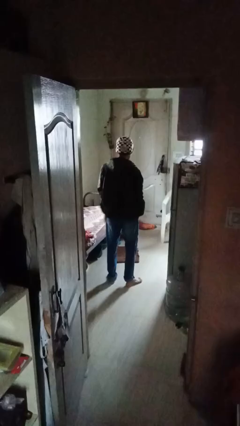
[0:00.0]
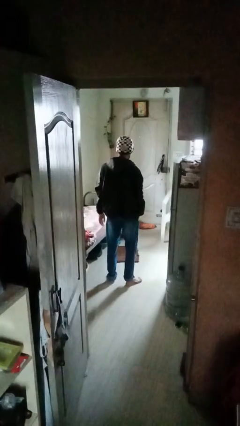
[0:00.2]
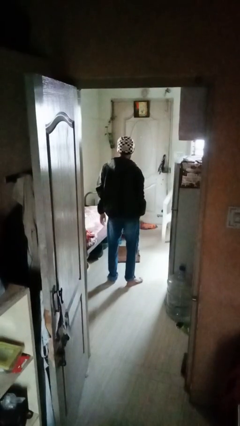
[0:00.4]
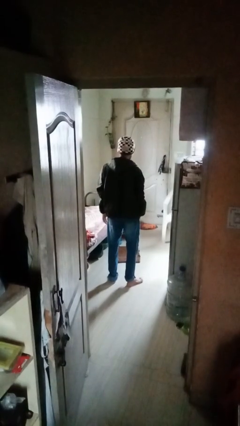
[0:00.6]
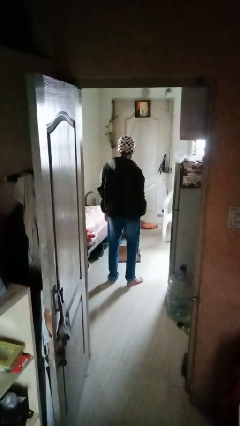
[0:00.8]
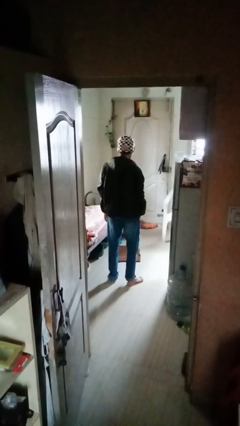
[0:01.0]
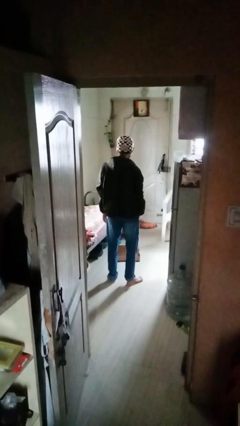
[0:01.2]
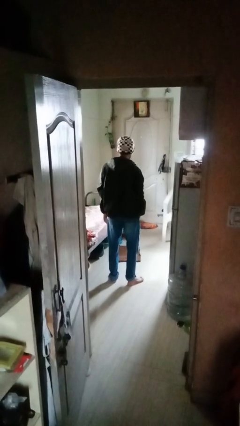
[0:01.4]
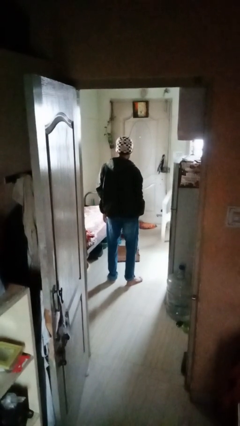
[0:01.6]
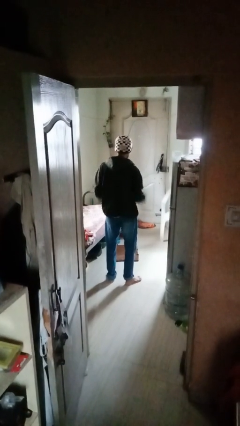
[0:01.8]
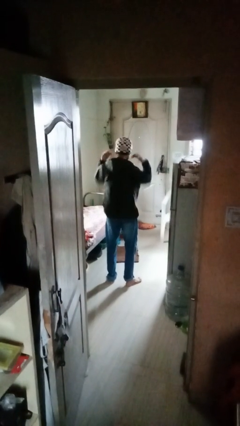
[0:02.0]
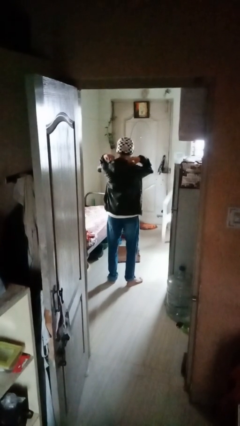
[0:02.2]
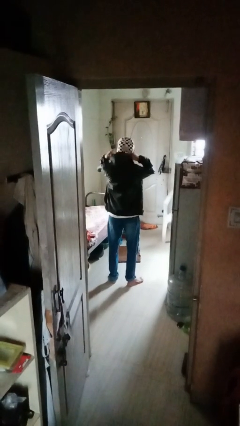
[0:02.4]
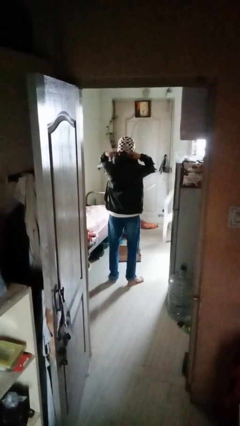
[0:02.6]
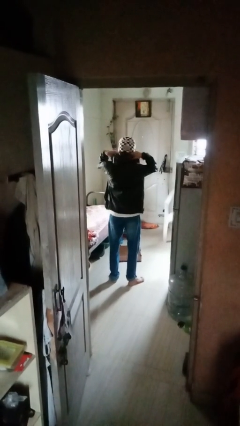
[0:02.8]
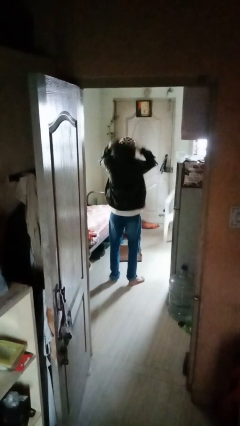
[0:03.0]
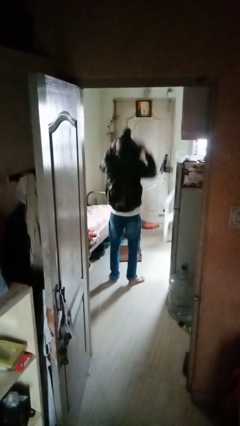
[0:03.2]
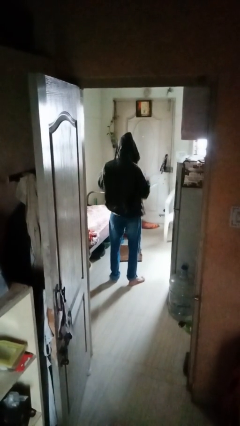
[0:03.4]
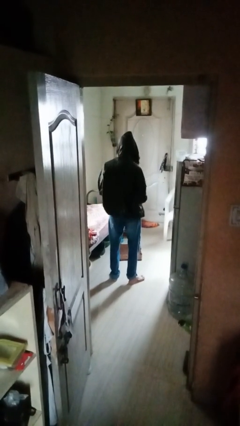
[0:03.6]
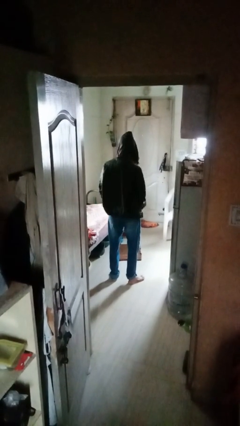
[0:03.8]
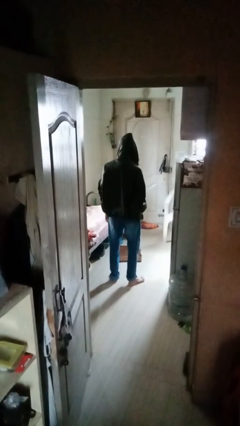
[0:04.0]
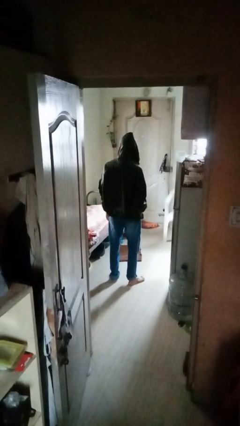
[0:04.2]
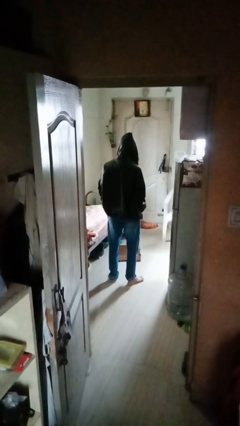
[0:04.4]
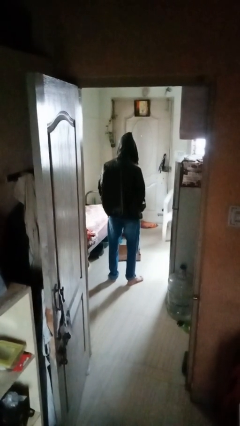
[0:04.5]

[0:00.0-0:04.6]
person puts on hoodie

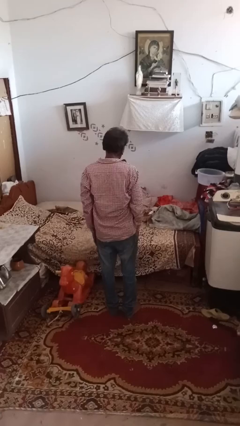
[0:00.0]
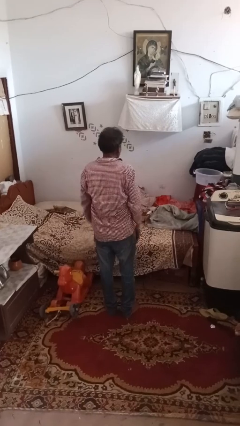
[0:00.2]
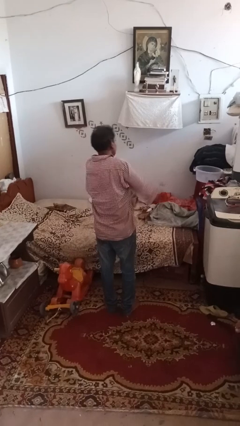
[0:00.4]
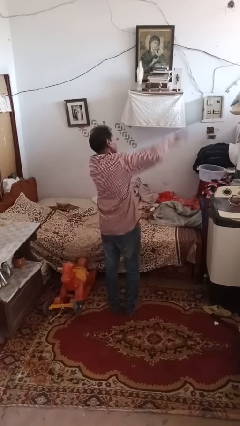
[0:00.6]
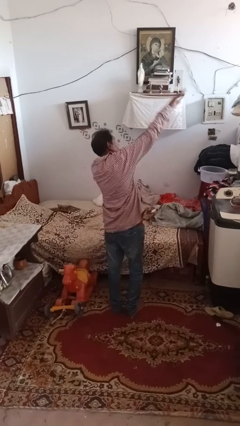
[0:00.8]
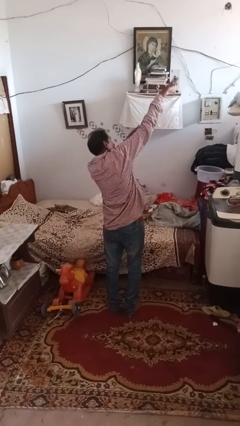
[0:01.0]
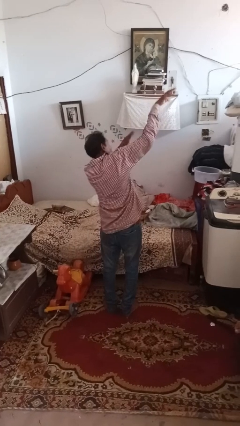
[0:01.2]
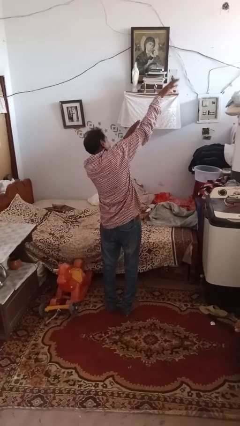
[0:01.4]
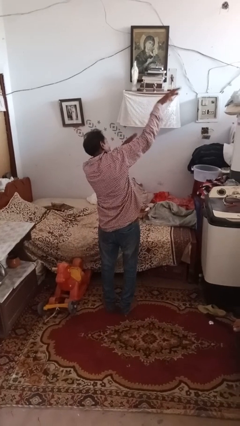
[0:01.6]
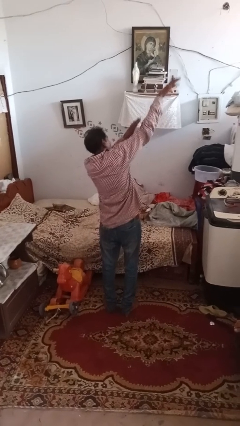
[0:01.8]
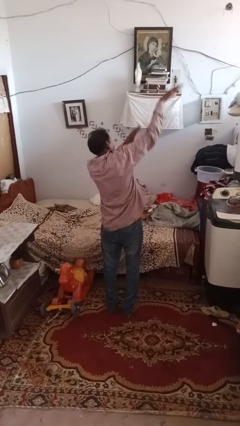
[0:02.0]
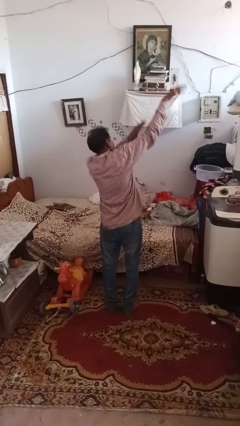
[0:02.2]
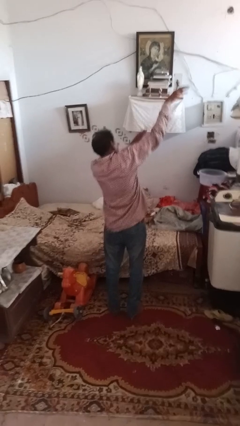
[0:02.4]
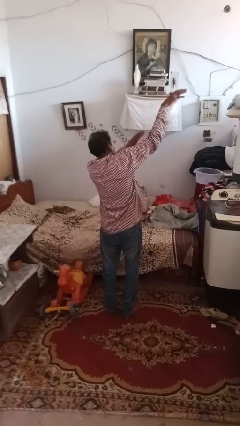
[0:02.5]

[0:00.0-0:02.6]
person dances in place

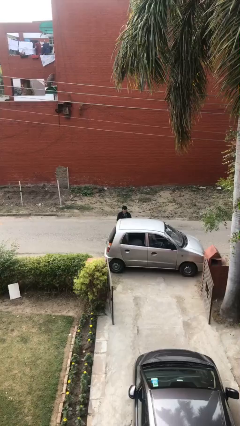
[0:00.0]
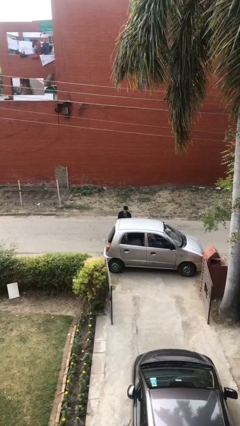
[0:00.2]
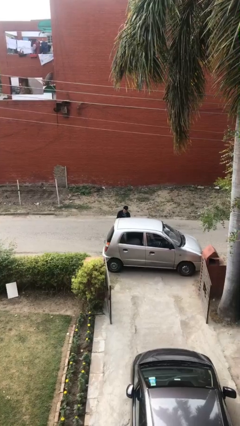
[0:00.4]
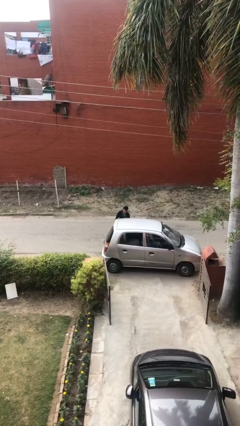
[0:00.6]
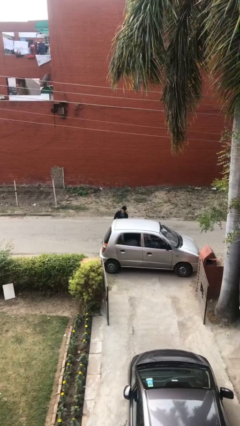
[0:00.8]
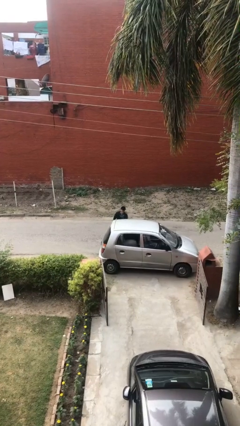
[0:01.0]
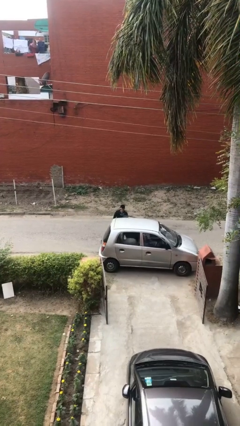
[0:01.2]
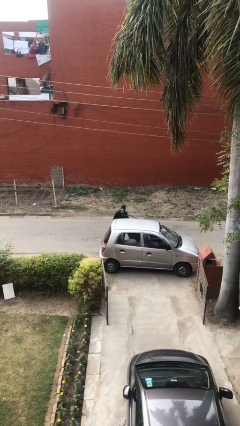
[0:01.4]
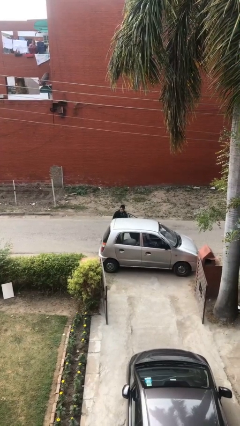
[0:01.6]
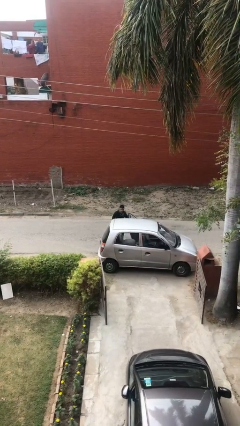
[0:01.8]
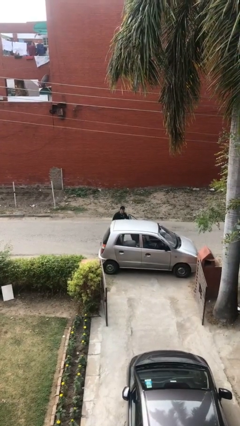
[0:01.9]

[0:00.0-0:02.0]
person opens car door

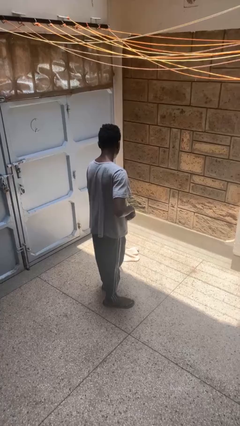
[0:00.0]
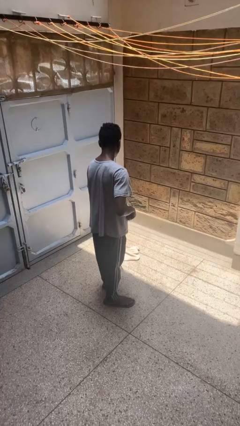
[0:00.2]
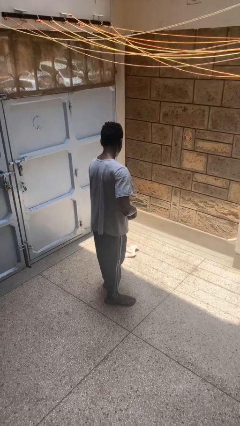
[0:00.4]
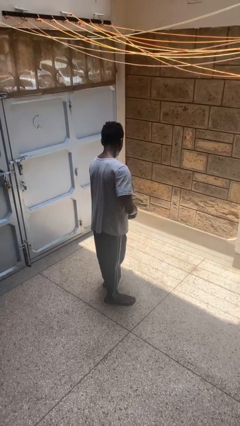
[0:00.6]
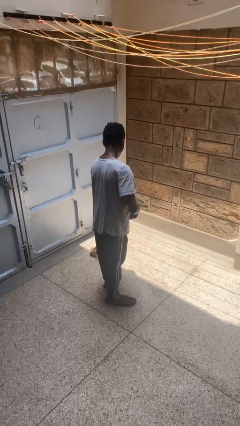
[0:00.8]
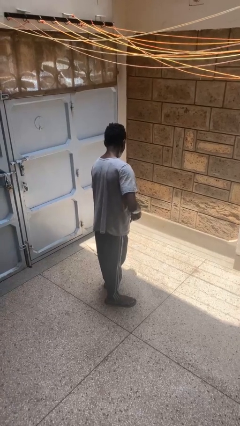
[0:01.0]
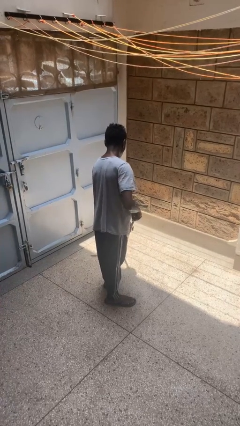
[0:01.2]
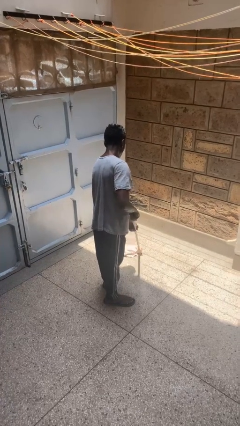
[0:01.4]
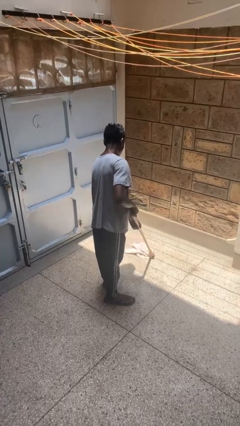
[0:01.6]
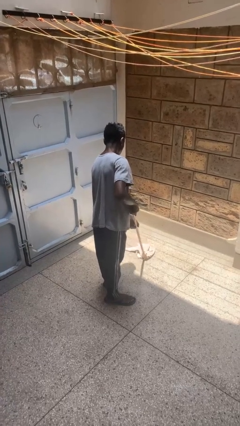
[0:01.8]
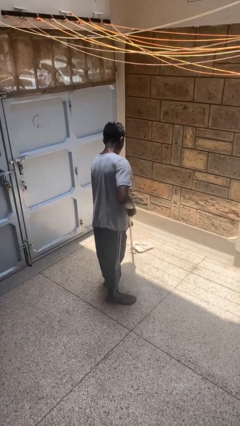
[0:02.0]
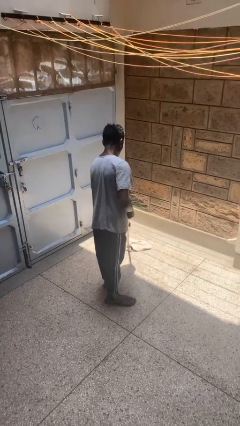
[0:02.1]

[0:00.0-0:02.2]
person mops

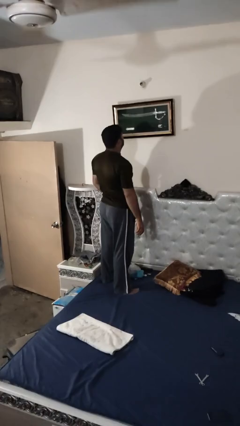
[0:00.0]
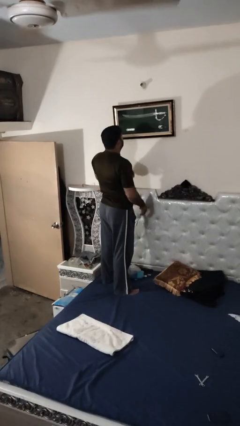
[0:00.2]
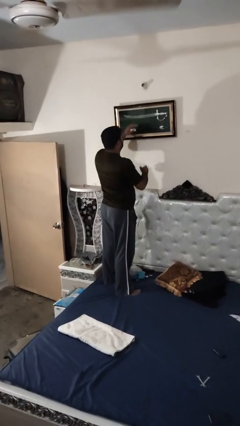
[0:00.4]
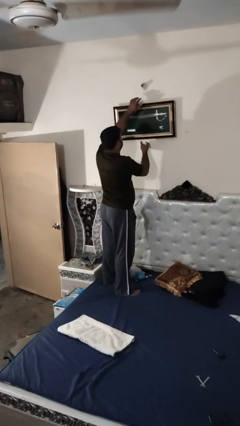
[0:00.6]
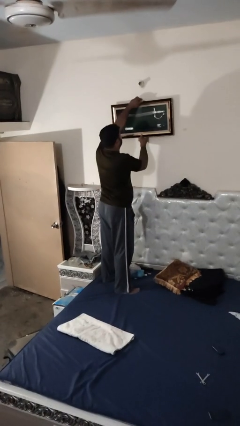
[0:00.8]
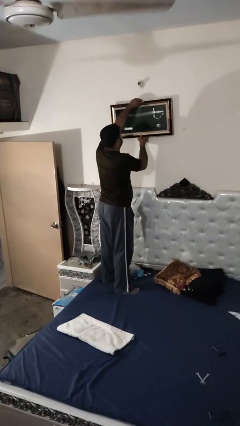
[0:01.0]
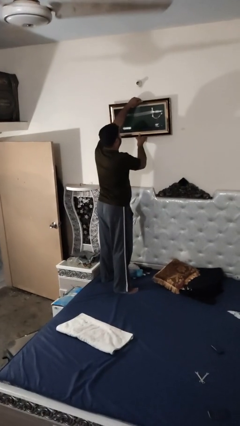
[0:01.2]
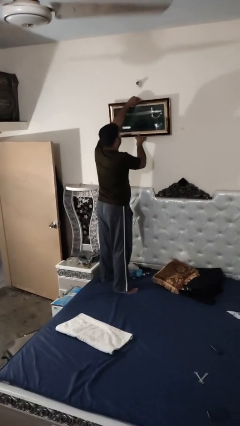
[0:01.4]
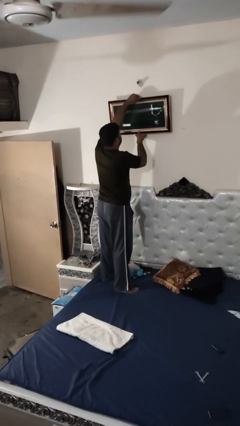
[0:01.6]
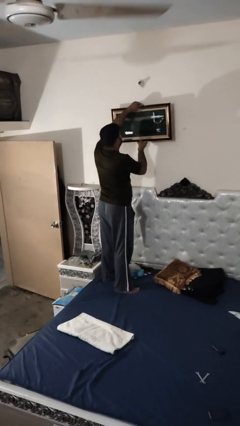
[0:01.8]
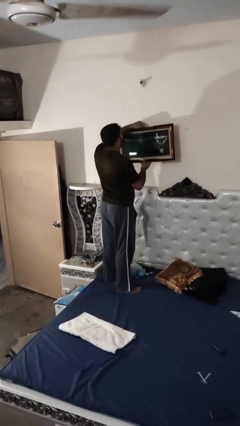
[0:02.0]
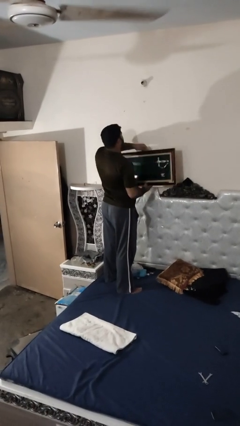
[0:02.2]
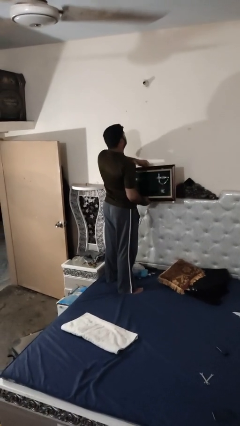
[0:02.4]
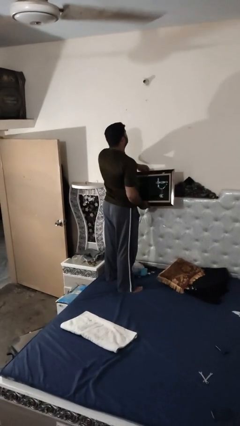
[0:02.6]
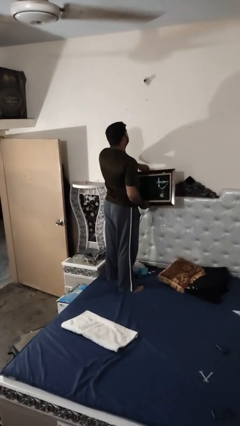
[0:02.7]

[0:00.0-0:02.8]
person takes down picture frame

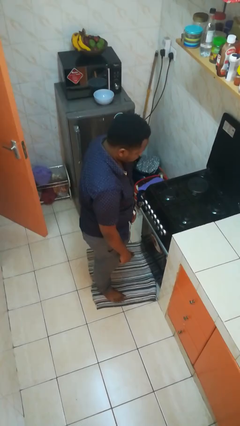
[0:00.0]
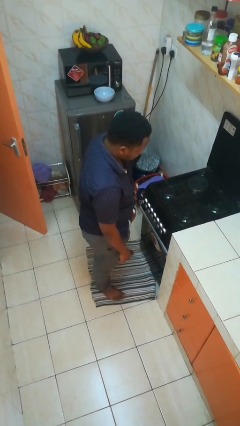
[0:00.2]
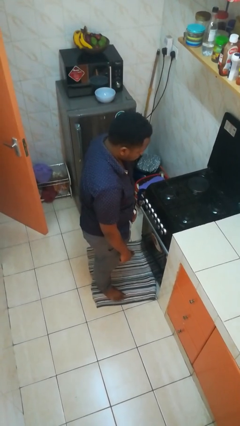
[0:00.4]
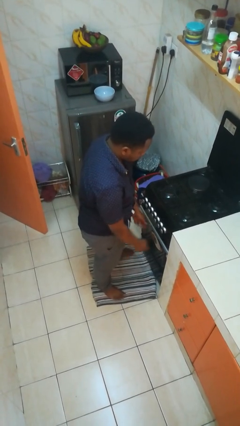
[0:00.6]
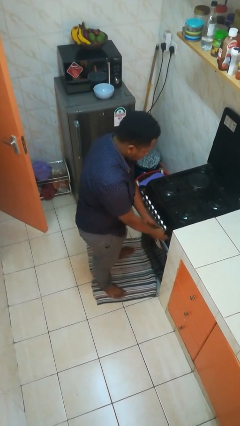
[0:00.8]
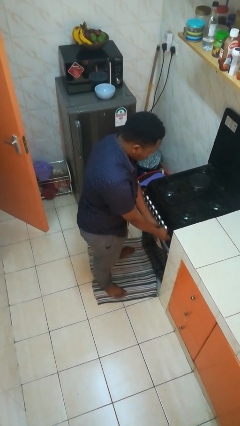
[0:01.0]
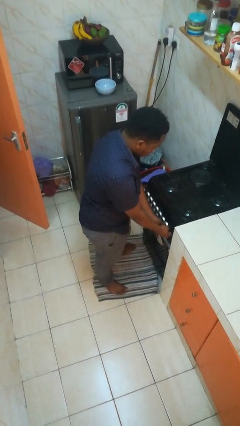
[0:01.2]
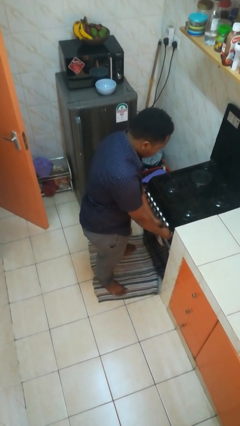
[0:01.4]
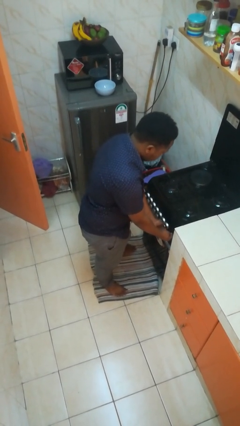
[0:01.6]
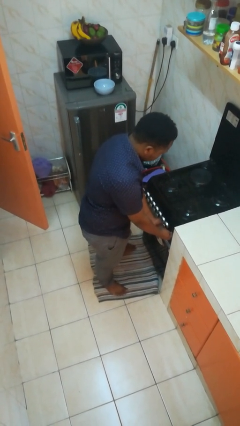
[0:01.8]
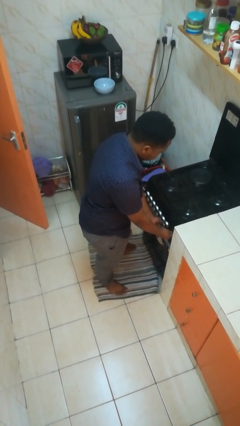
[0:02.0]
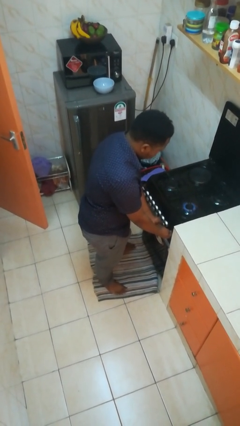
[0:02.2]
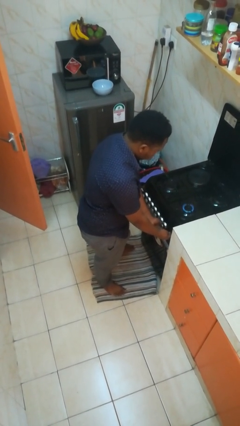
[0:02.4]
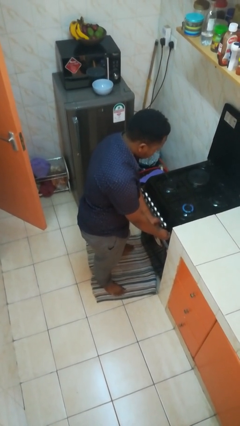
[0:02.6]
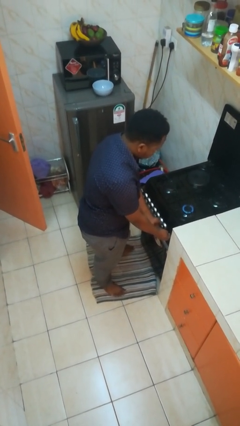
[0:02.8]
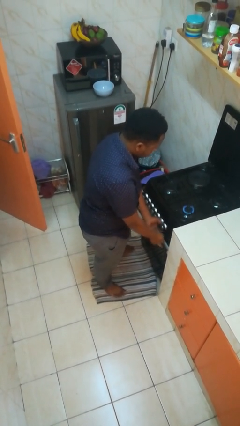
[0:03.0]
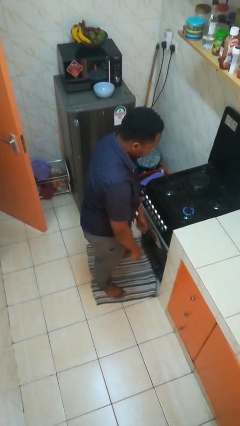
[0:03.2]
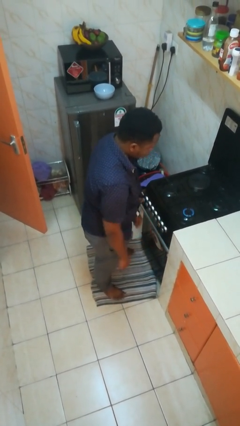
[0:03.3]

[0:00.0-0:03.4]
person turns on stovetop

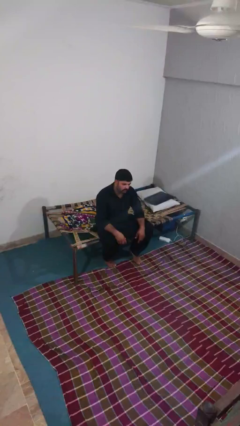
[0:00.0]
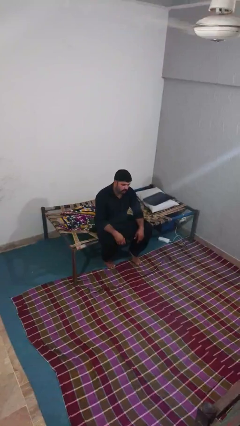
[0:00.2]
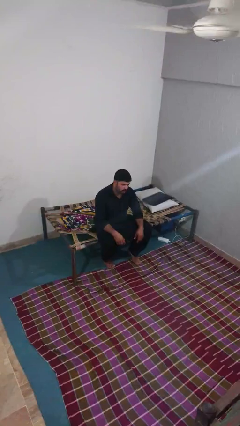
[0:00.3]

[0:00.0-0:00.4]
person gestures come here
